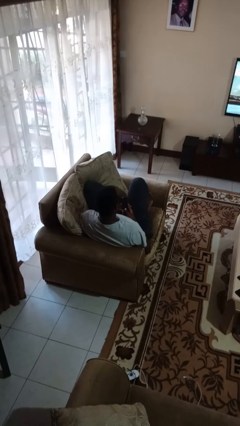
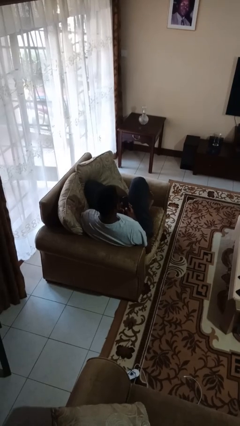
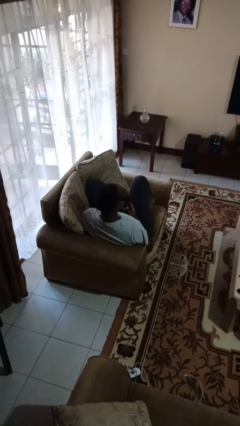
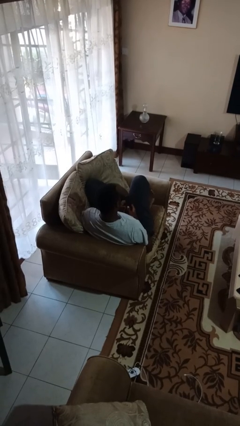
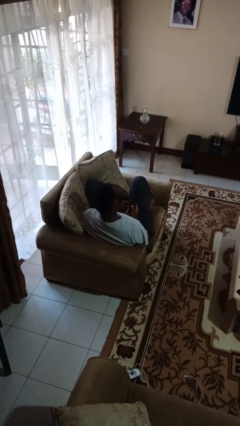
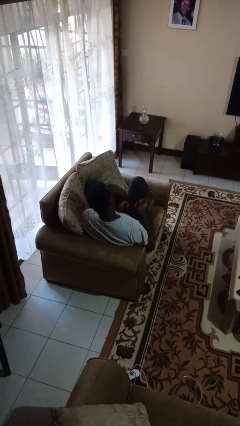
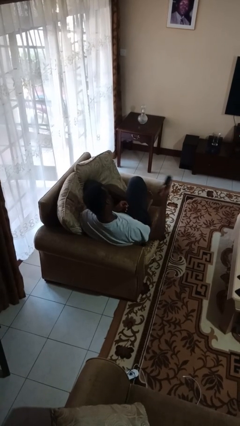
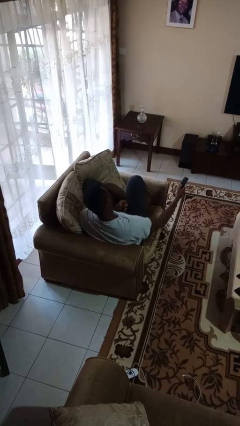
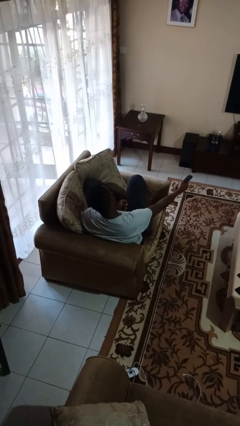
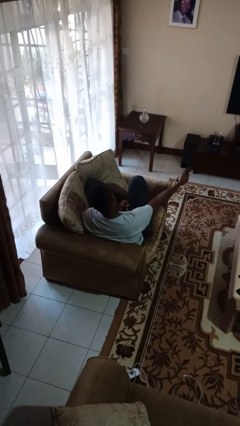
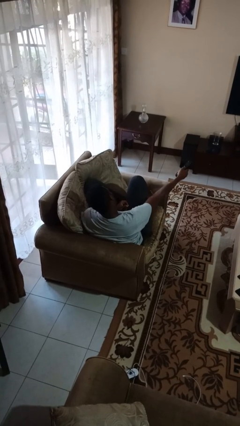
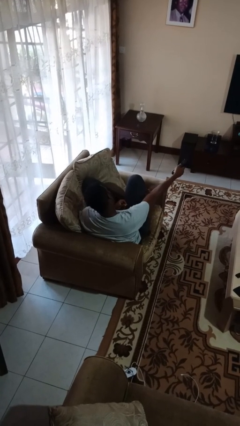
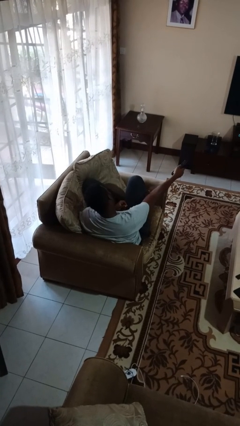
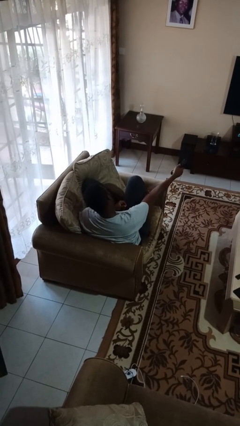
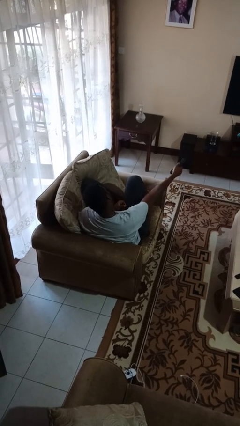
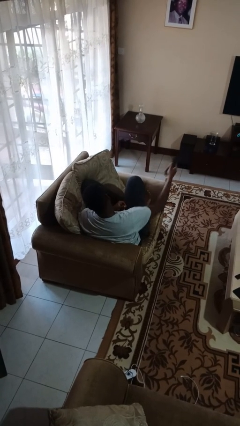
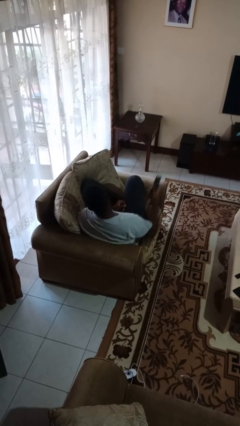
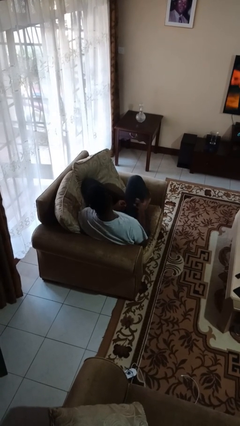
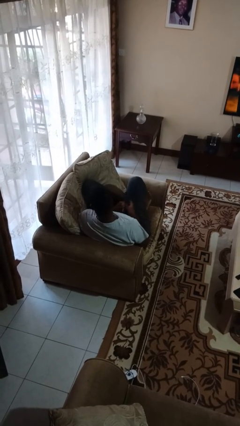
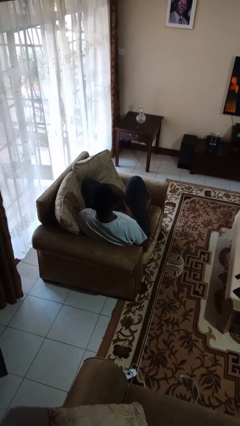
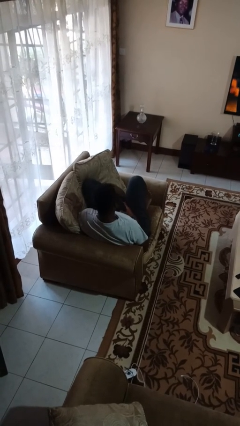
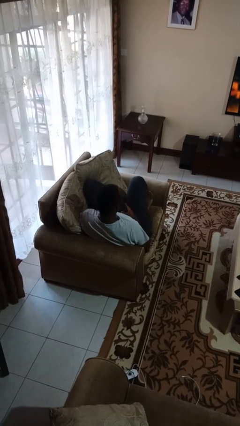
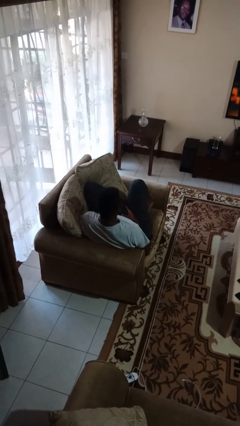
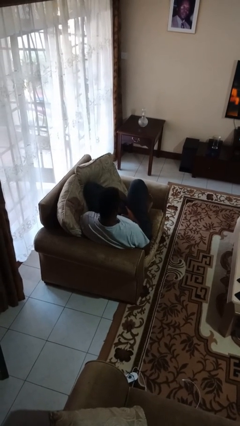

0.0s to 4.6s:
person uses television remote

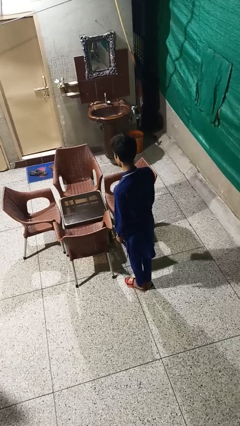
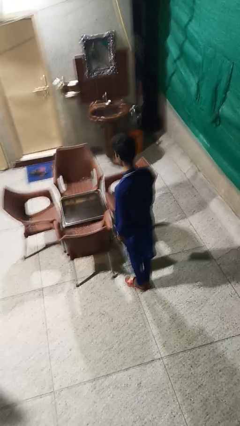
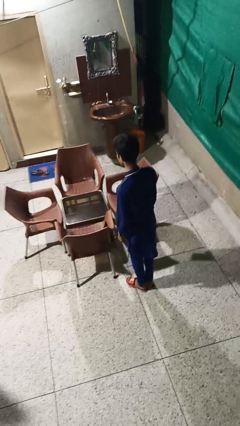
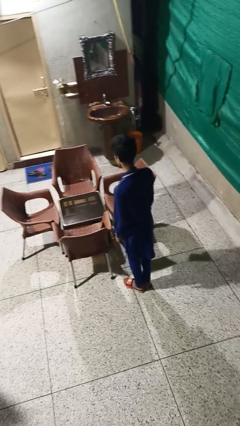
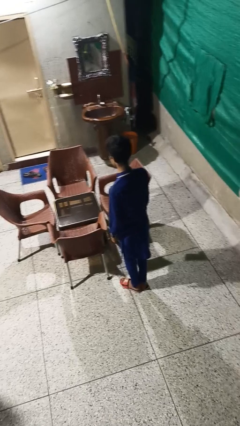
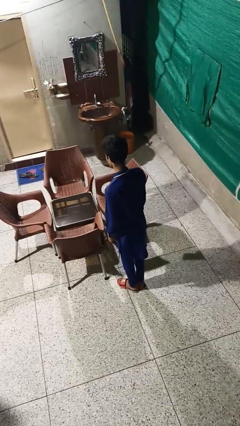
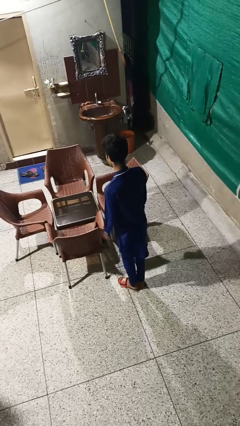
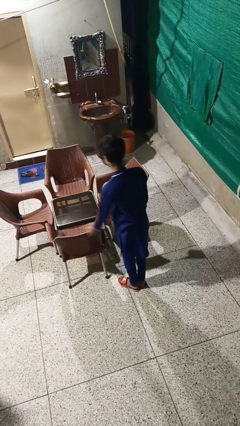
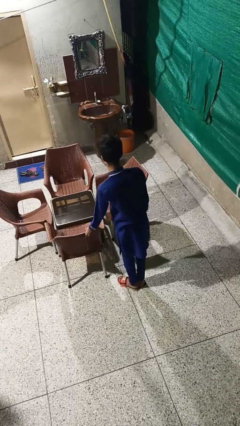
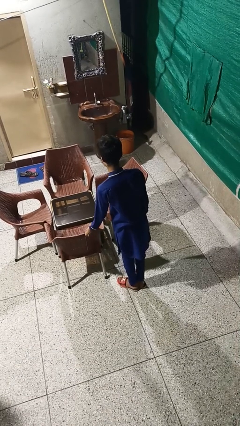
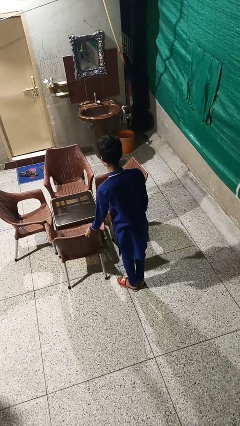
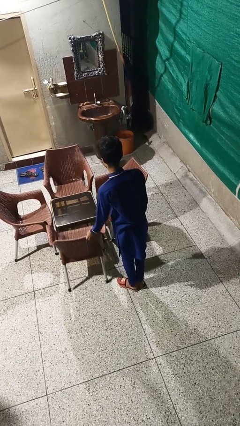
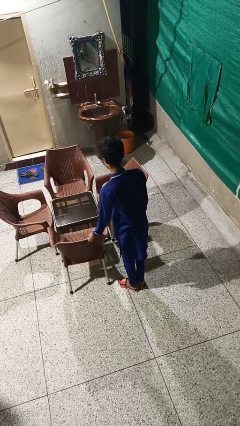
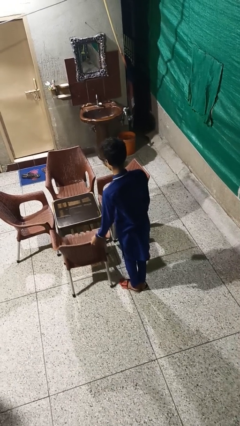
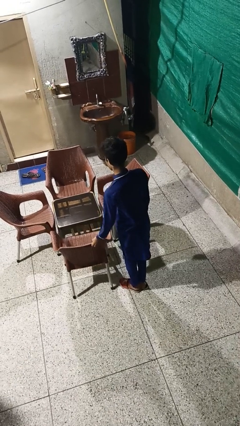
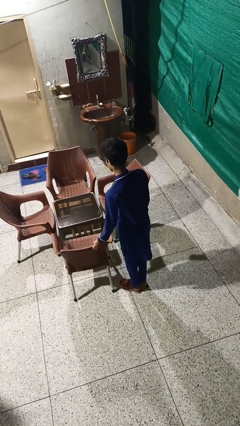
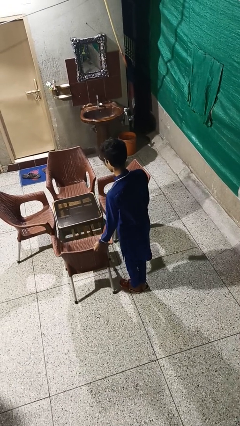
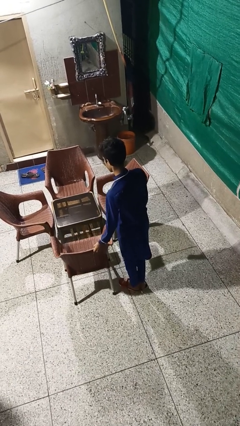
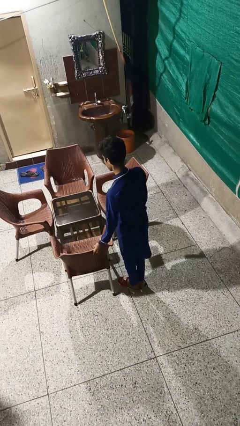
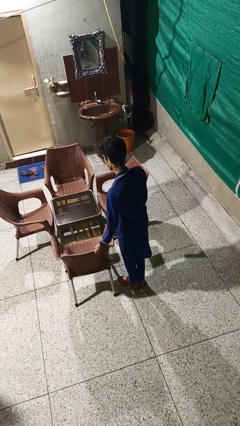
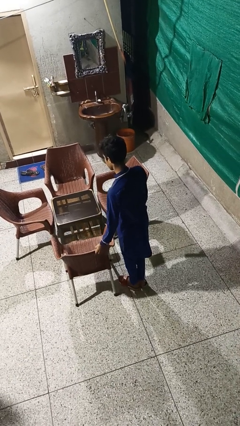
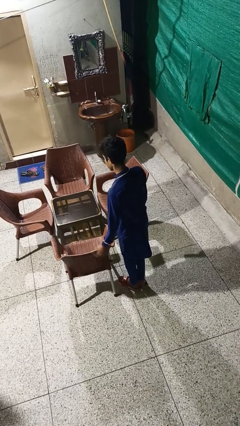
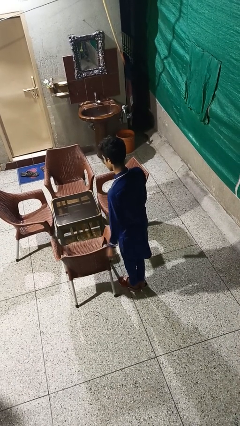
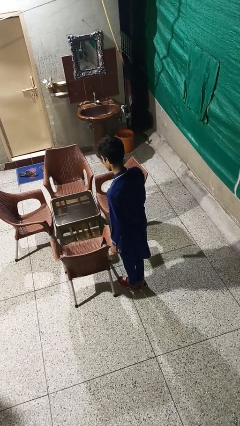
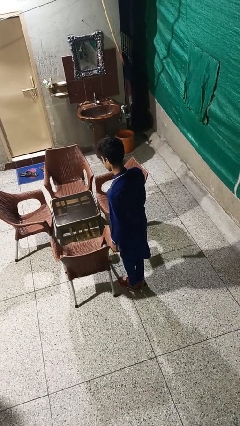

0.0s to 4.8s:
person pulls out chair

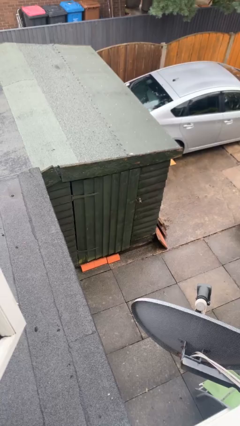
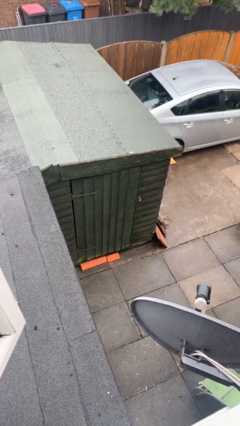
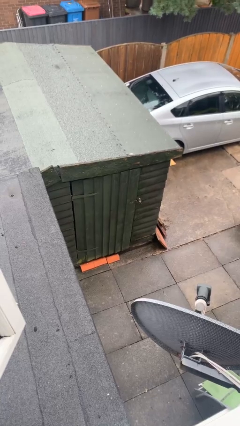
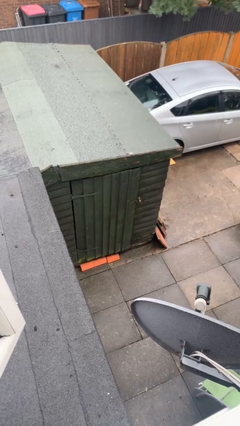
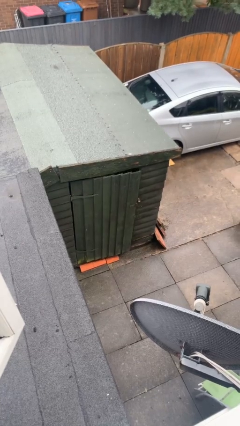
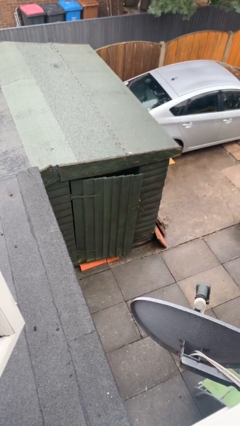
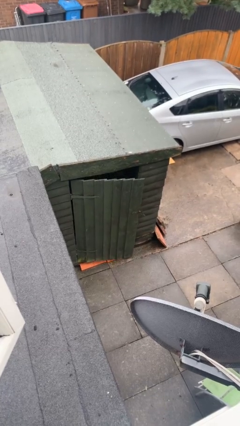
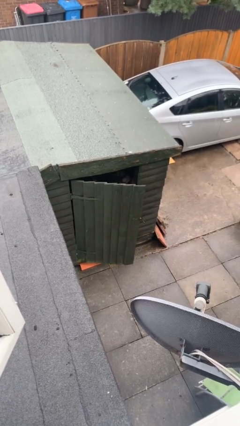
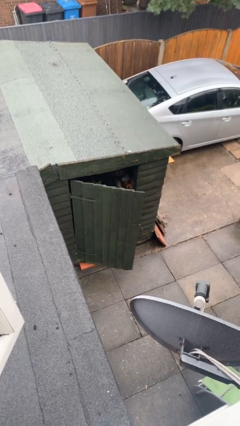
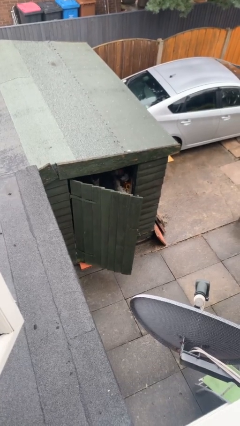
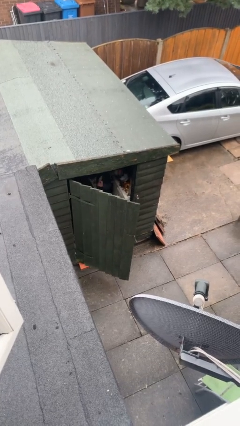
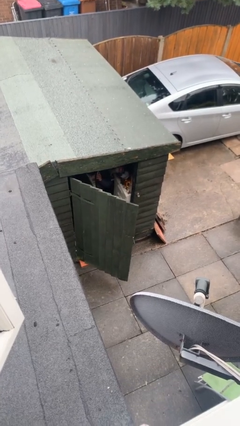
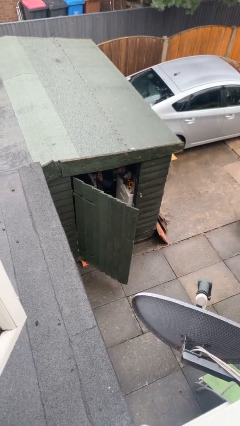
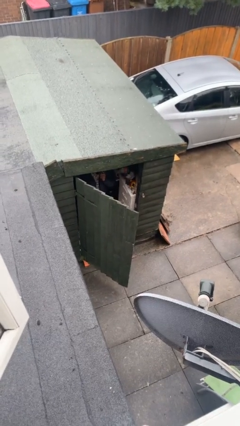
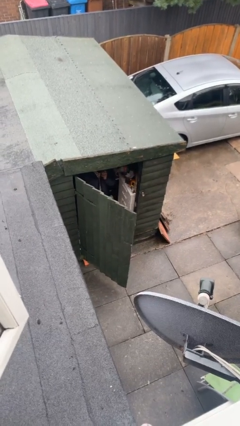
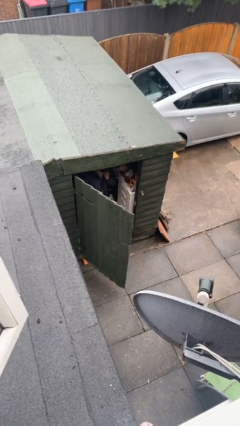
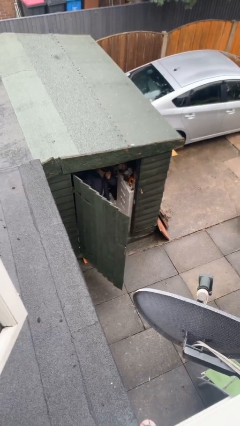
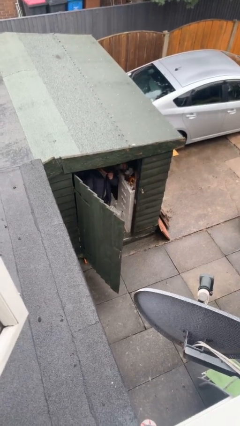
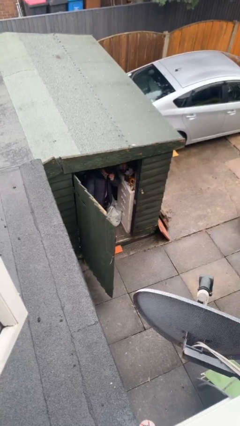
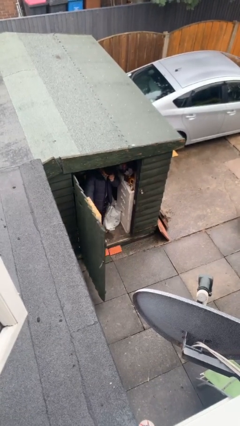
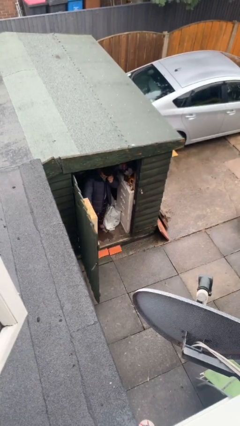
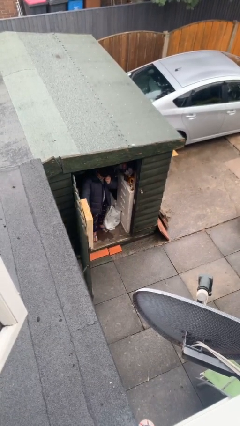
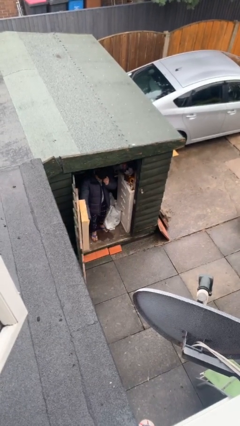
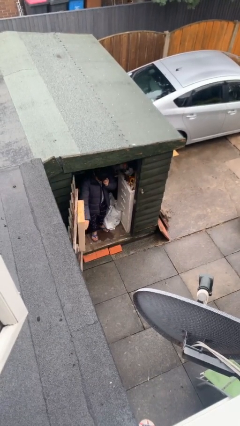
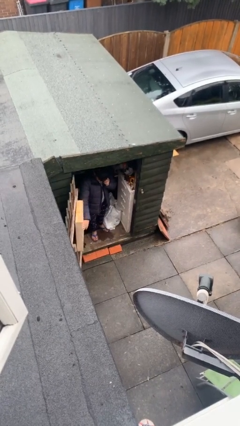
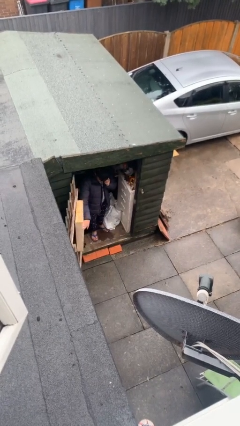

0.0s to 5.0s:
person opens facility door

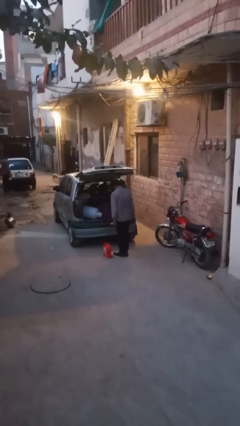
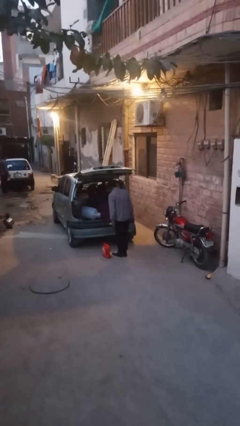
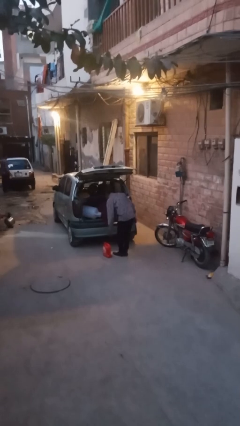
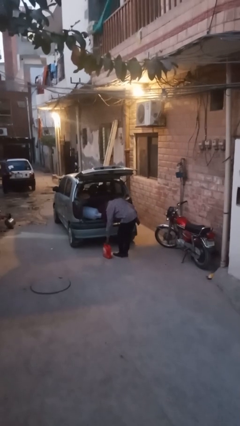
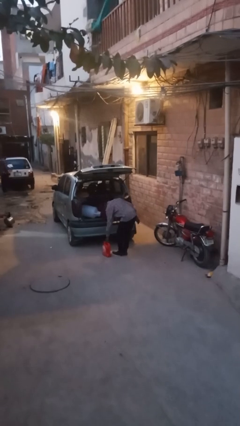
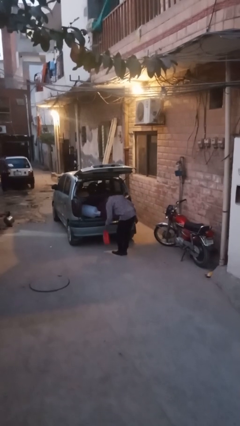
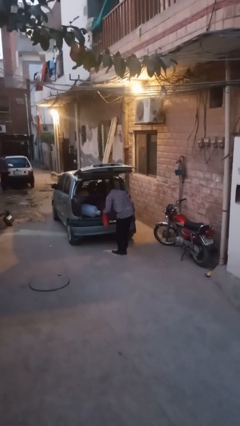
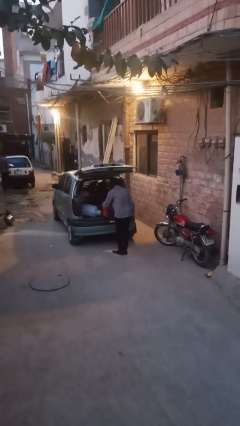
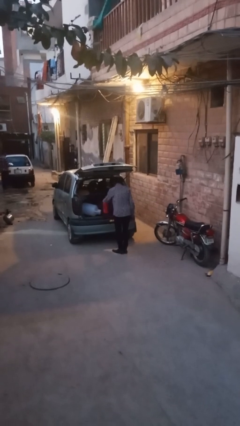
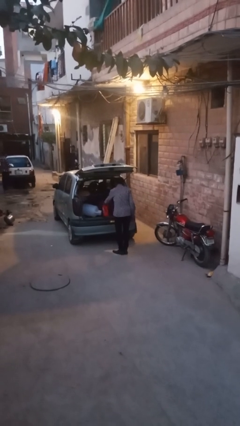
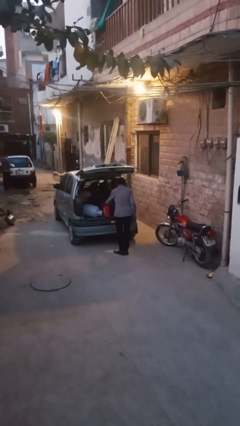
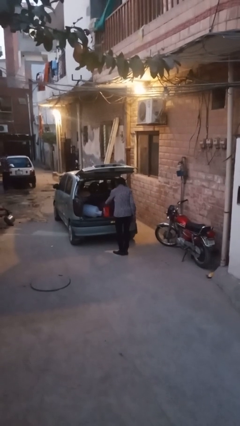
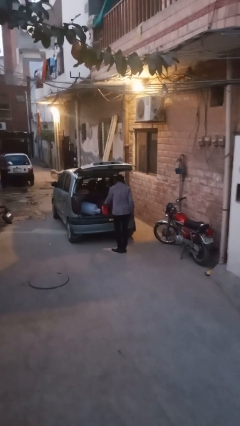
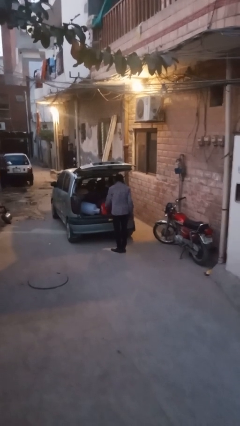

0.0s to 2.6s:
person loads car

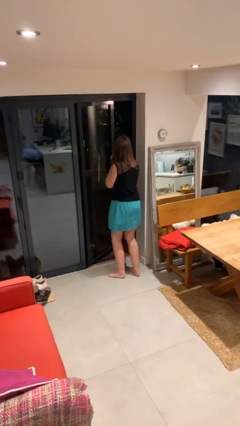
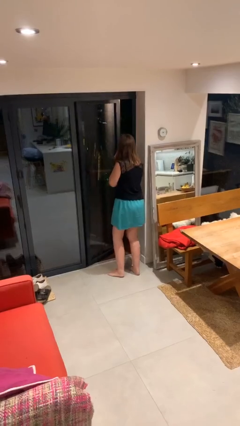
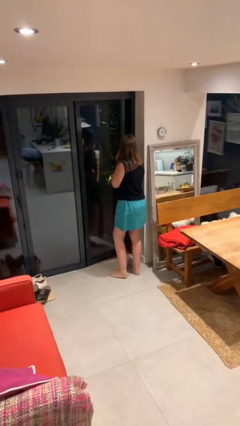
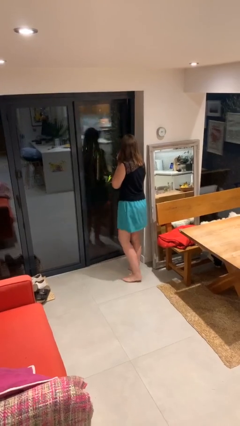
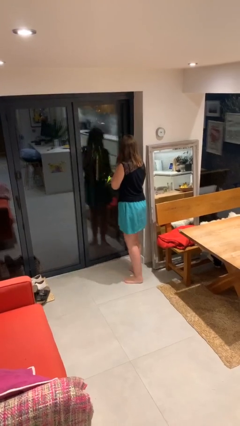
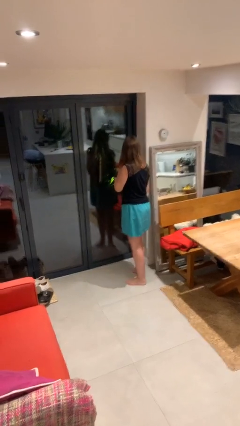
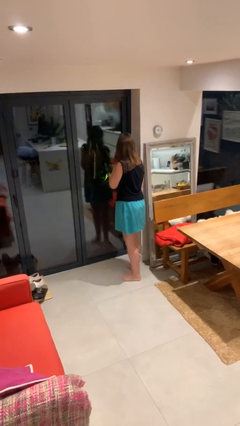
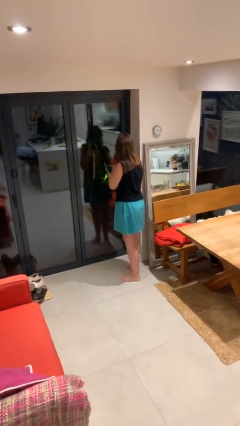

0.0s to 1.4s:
person closes facility door
